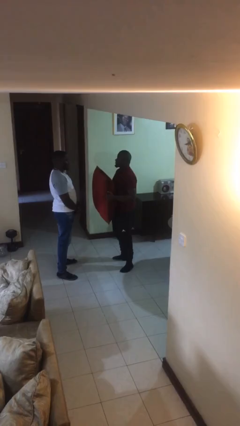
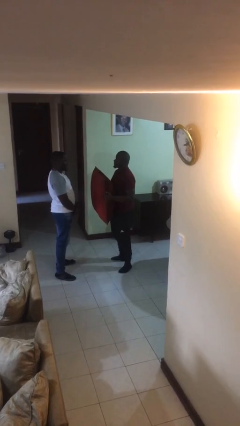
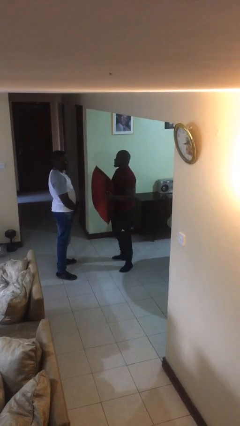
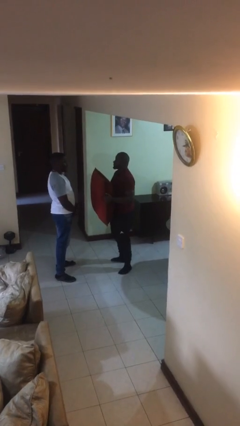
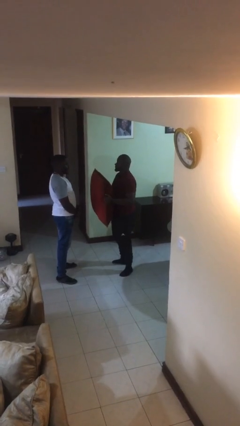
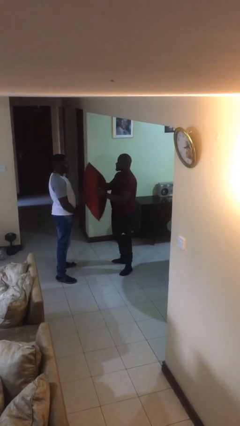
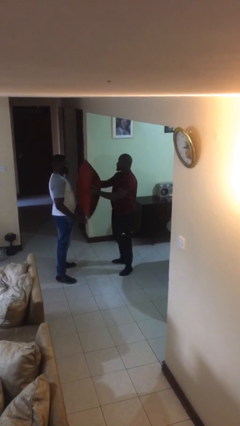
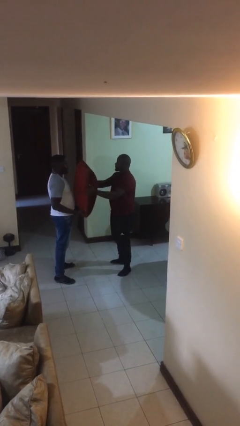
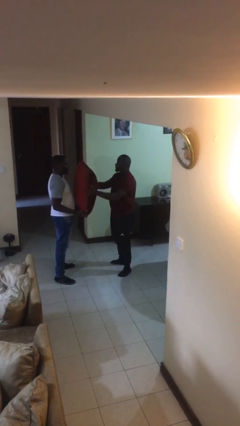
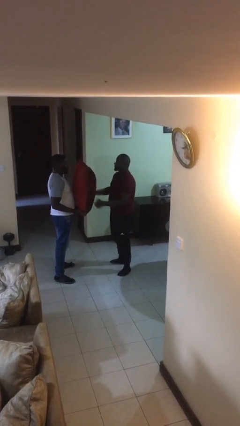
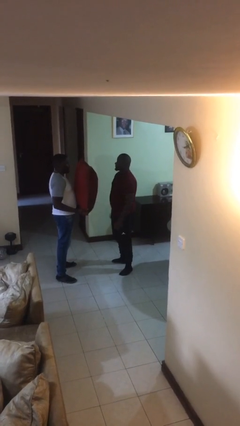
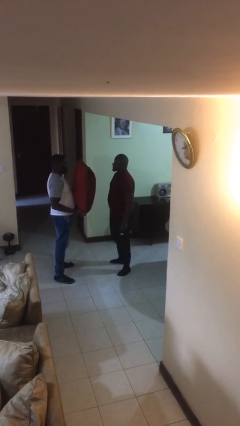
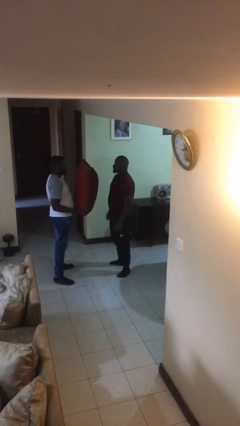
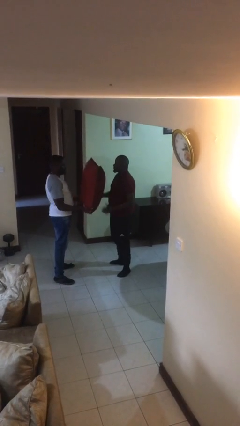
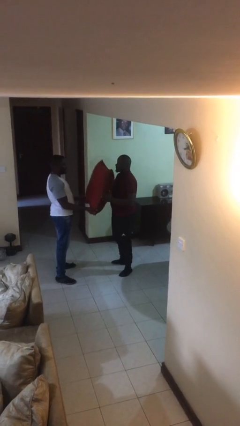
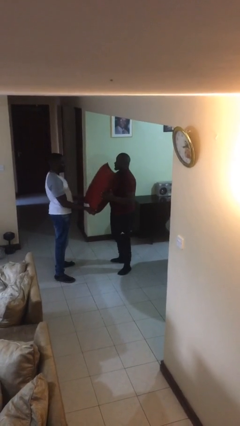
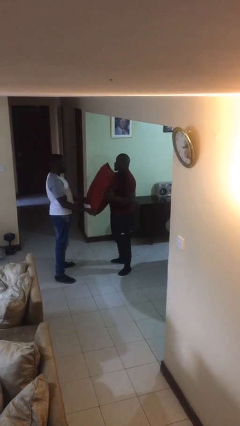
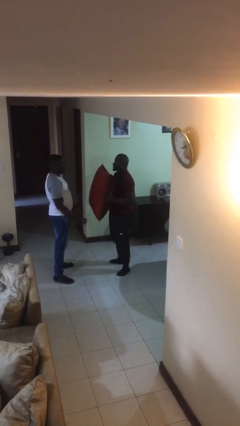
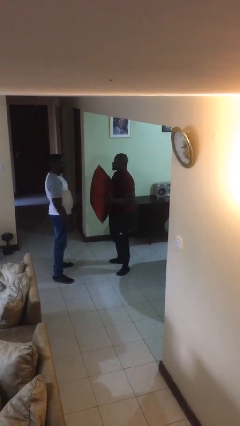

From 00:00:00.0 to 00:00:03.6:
person transfers object to person

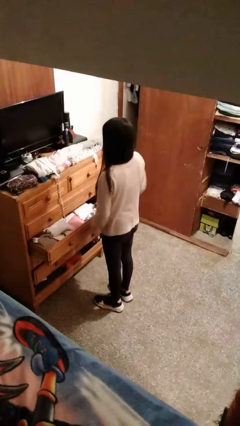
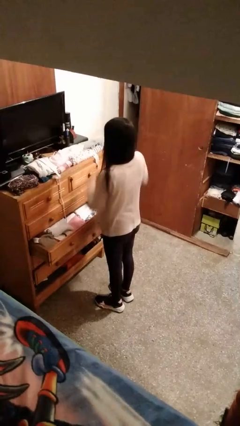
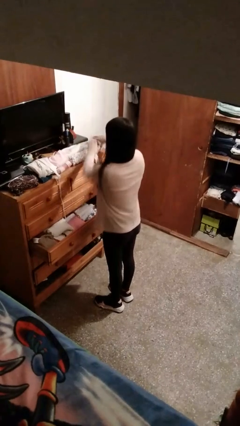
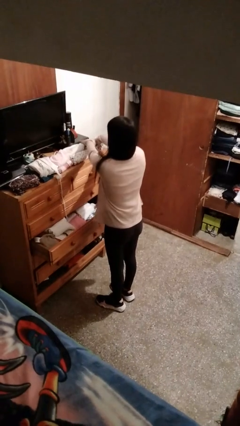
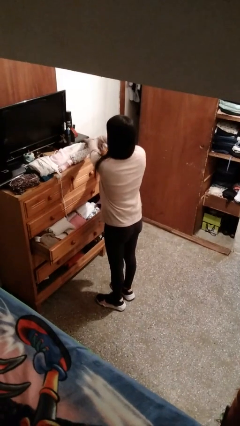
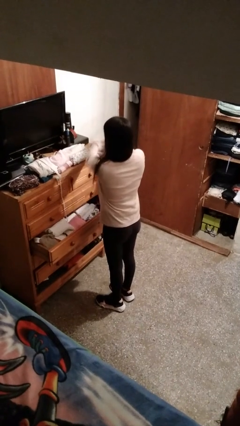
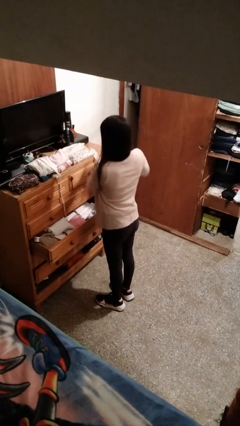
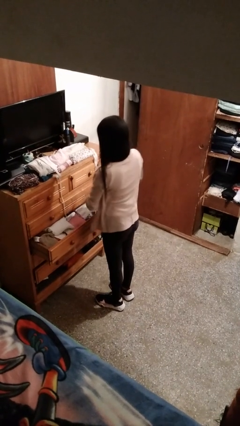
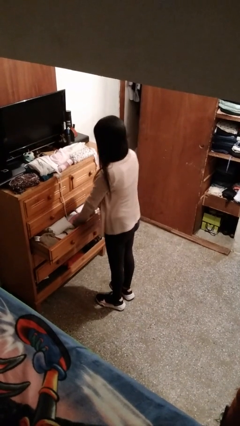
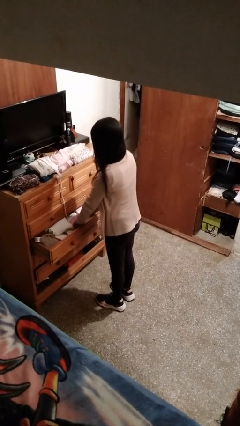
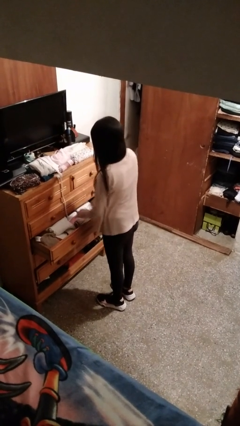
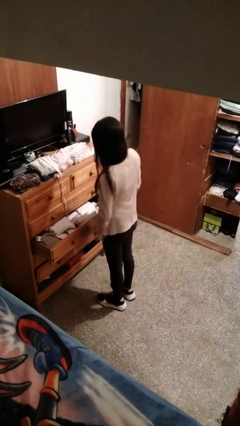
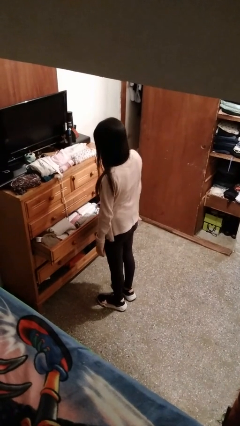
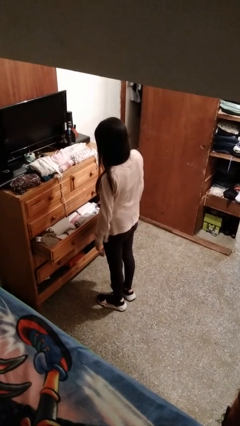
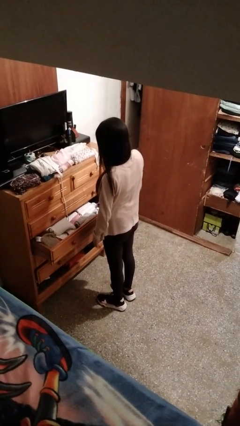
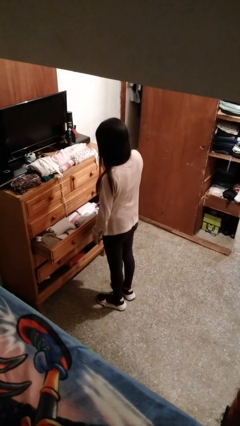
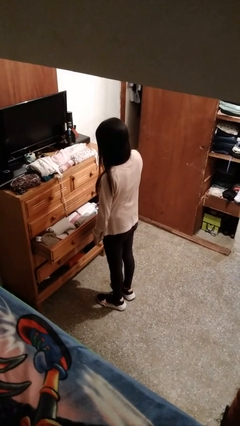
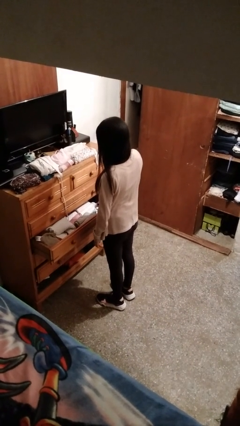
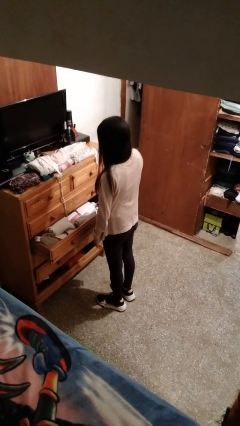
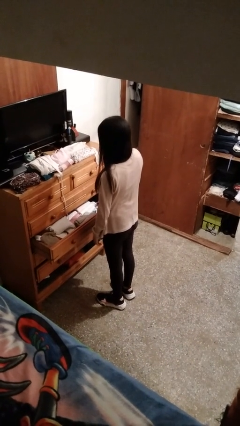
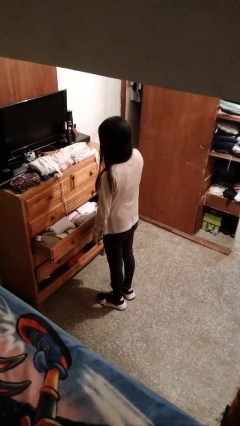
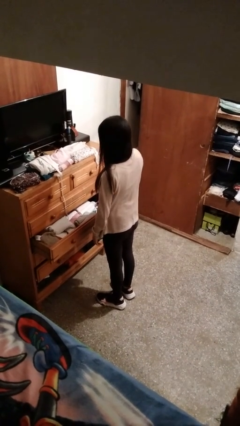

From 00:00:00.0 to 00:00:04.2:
person puts clothes into dresser

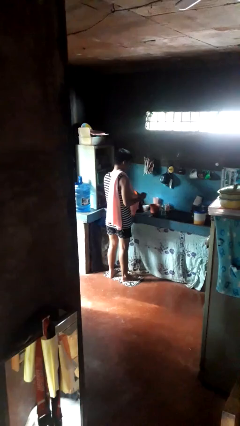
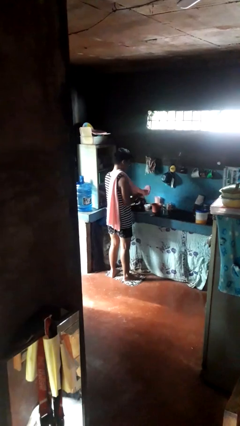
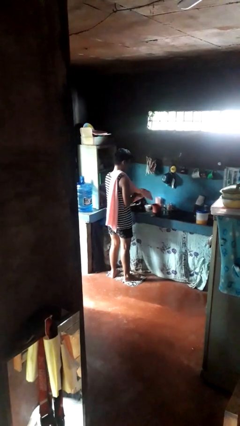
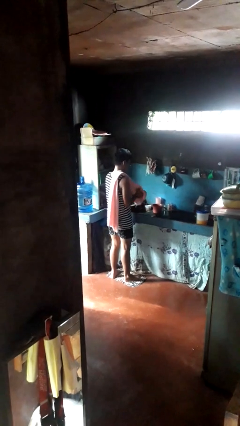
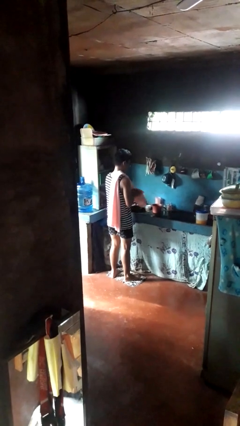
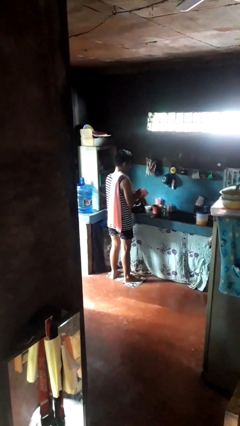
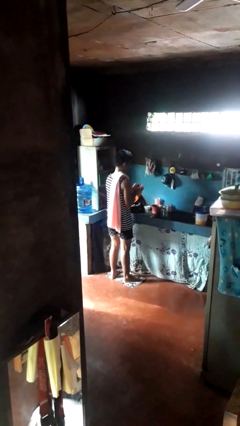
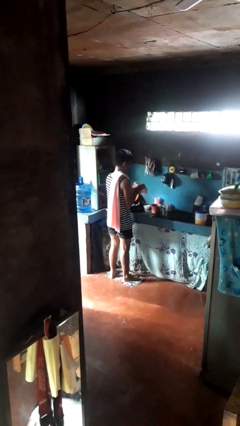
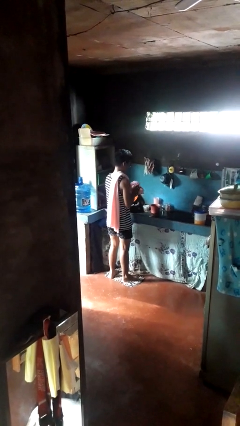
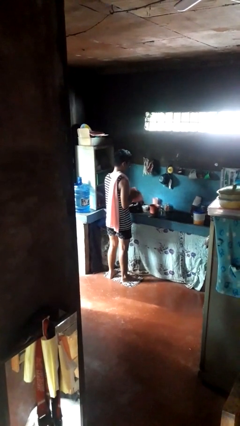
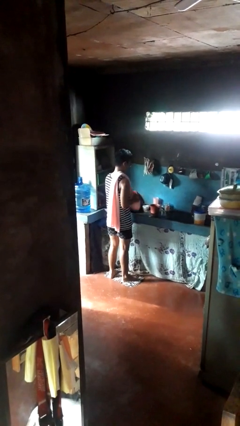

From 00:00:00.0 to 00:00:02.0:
person dries hands with towel

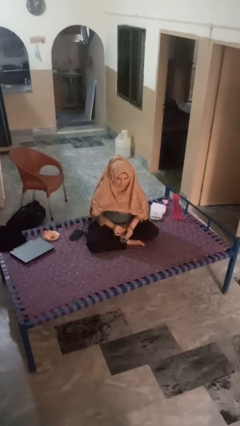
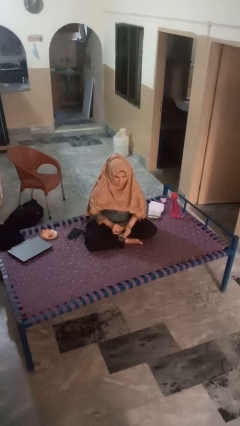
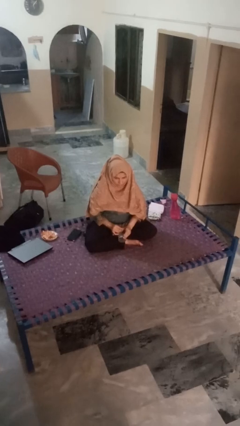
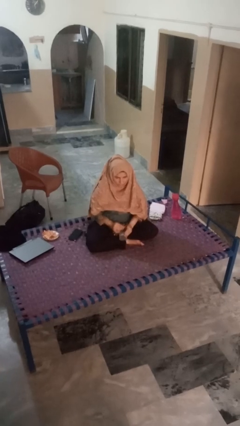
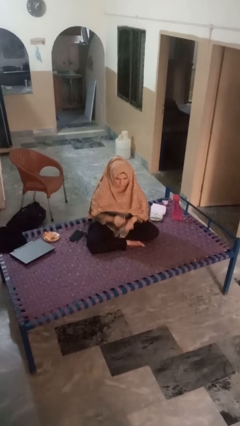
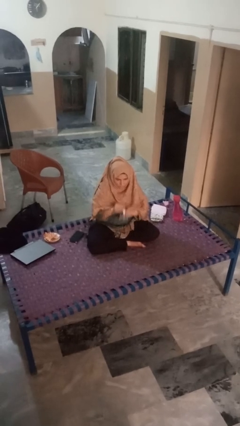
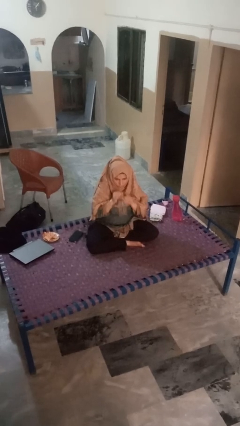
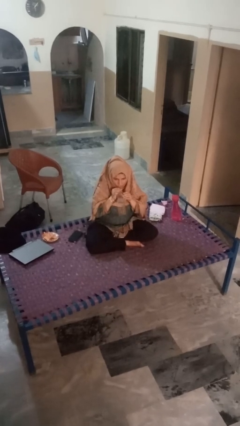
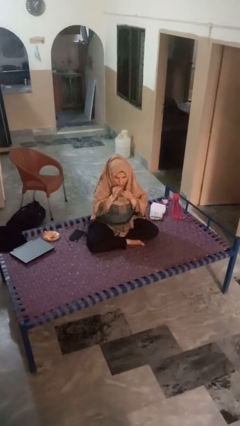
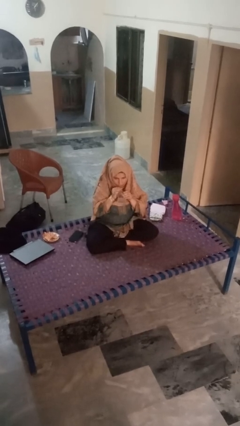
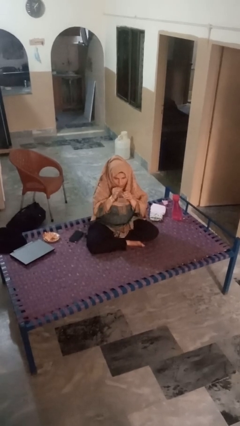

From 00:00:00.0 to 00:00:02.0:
person drinks from straw

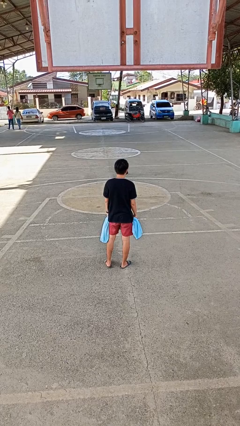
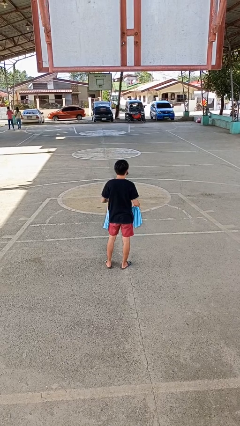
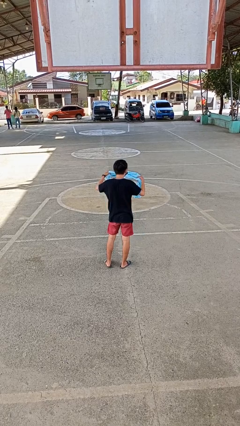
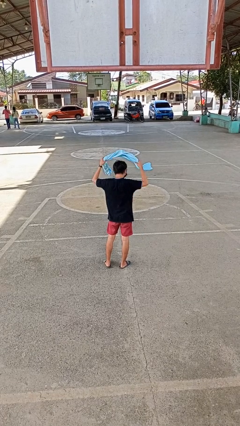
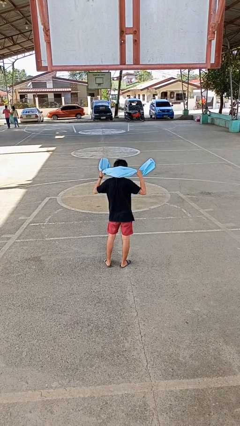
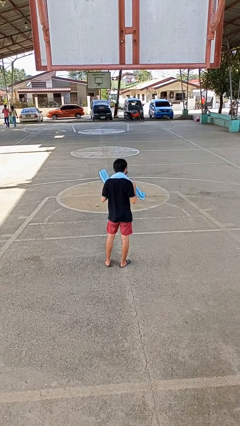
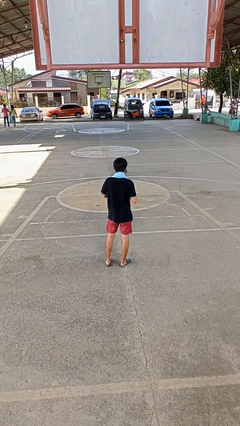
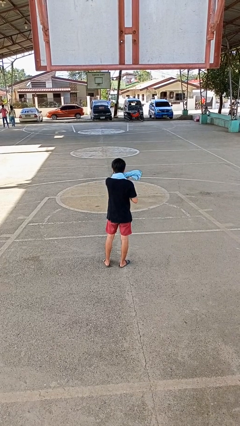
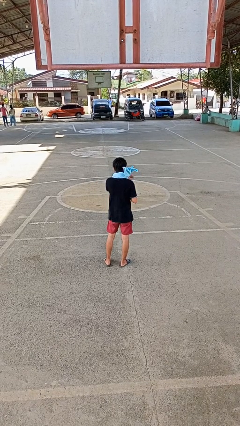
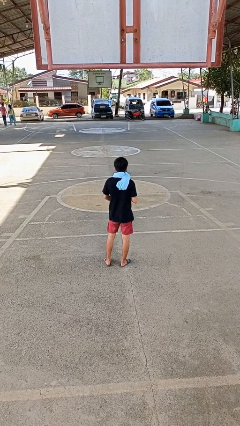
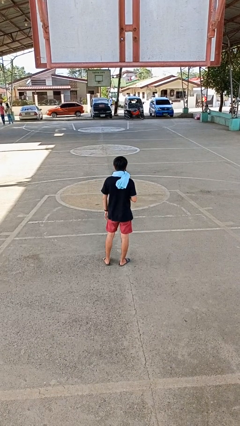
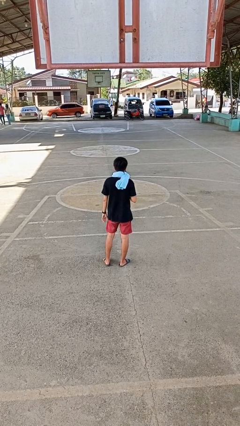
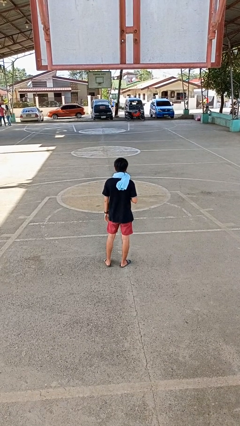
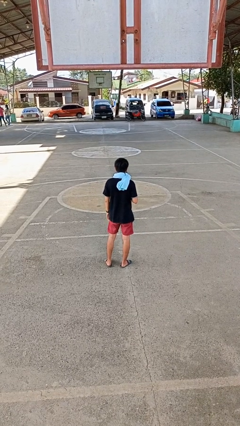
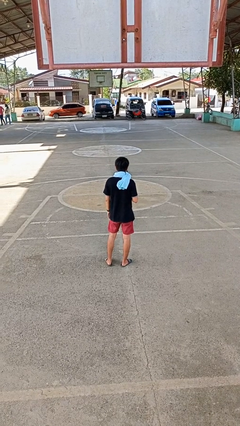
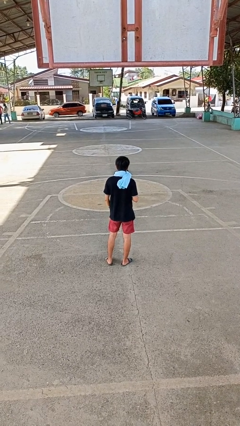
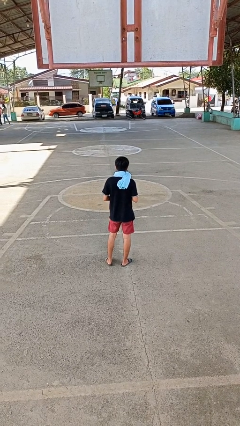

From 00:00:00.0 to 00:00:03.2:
person puts on scarf

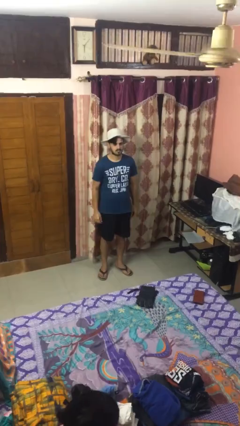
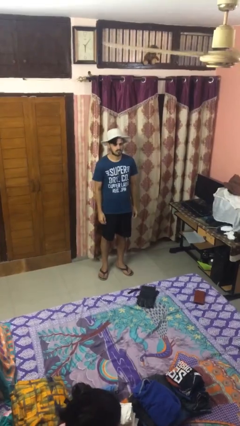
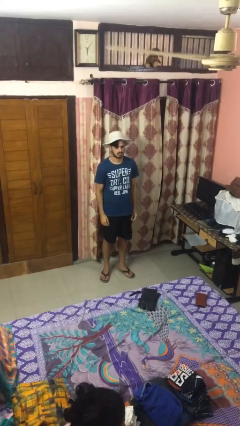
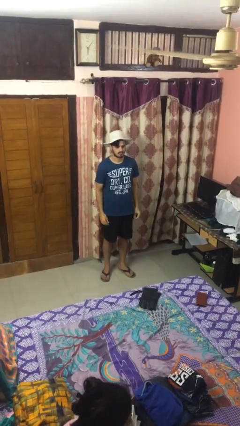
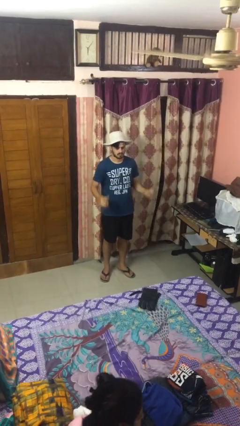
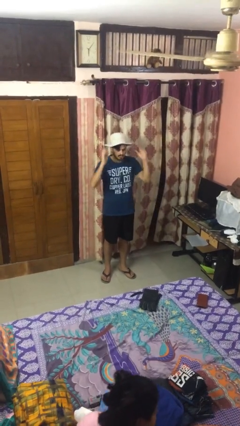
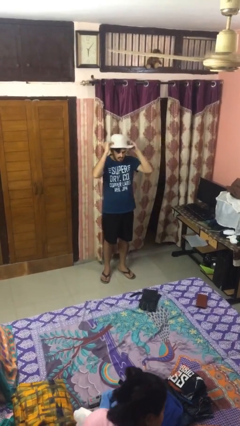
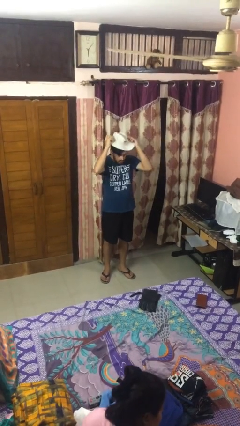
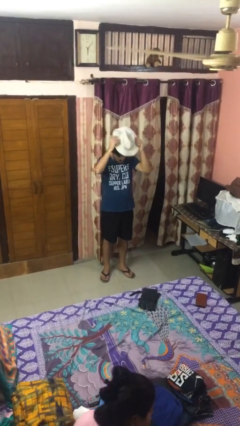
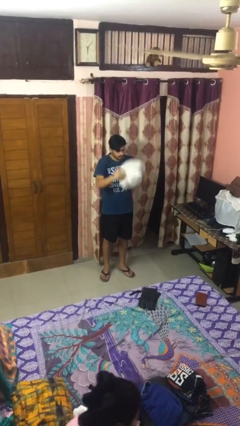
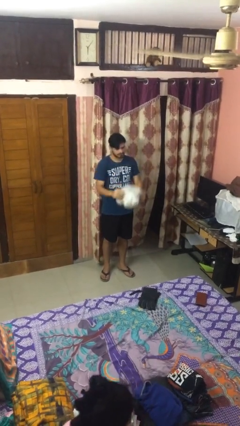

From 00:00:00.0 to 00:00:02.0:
person takes off hat

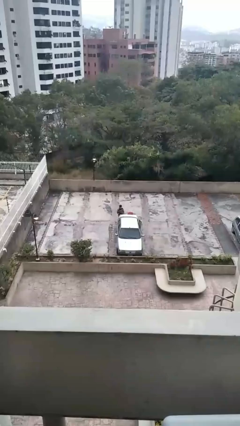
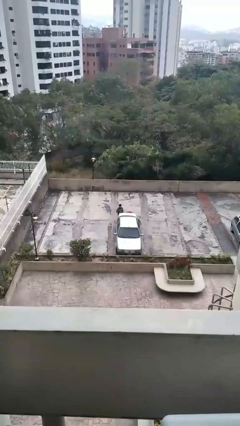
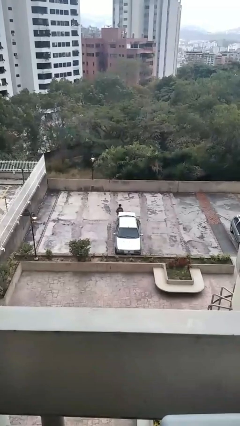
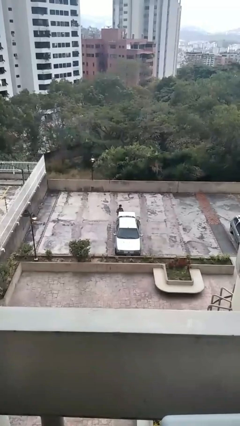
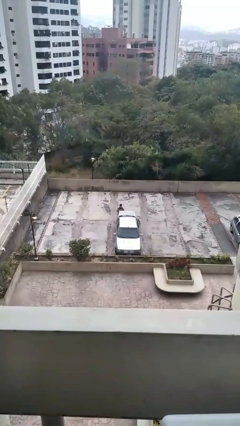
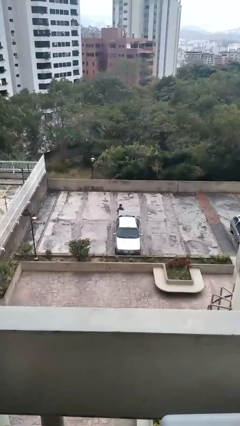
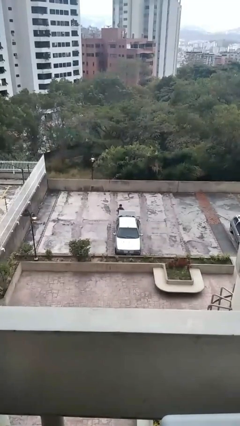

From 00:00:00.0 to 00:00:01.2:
person opens car trunk
